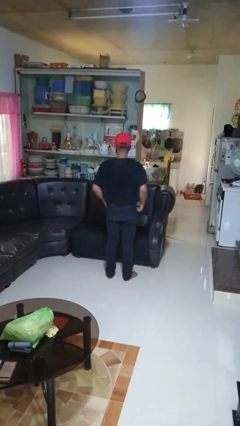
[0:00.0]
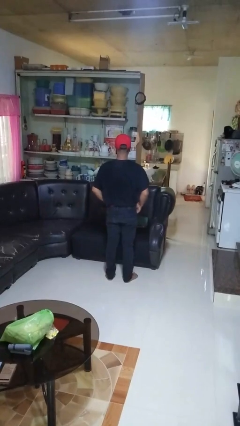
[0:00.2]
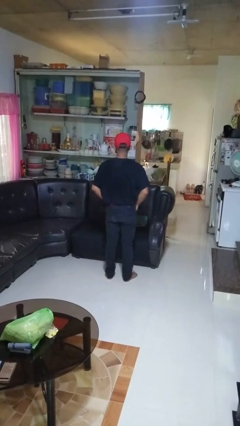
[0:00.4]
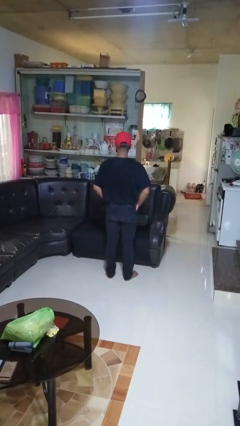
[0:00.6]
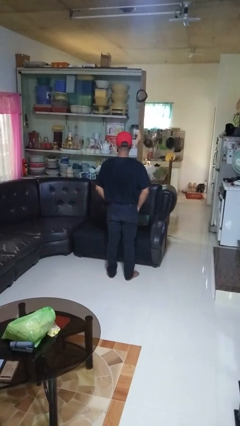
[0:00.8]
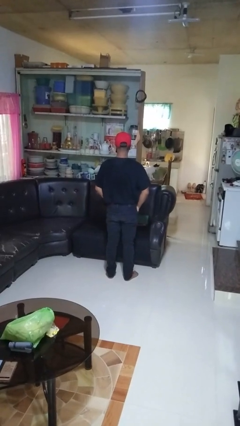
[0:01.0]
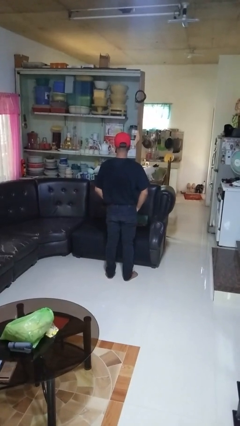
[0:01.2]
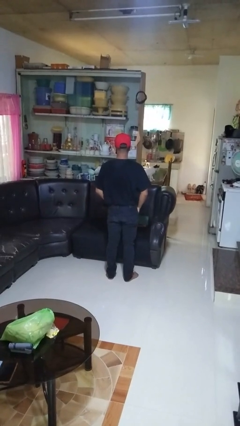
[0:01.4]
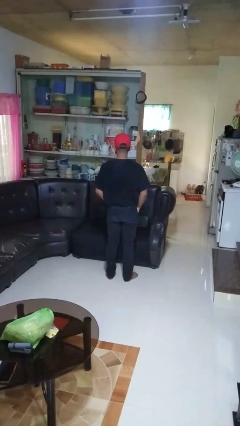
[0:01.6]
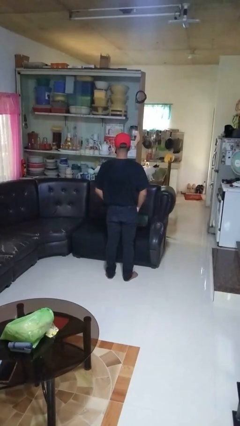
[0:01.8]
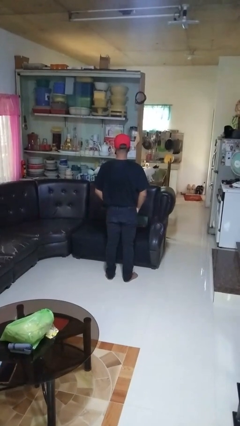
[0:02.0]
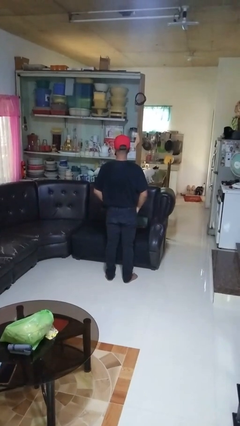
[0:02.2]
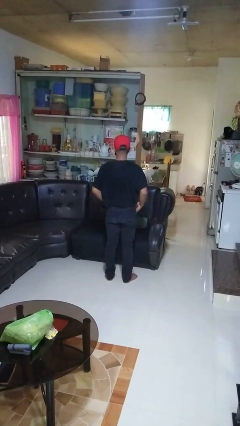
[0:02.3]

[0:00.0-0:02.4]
person puts hands in back pockets

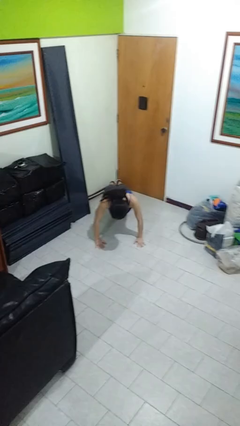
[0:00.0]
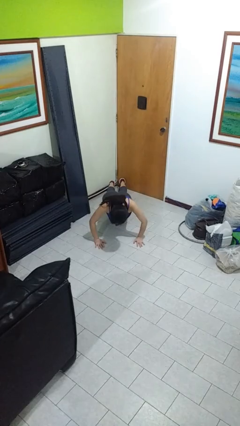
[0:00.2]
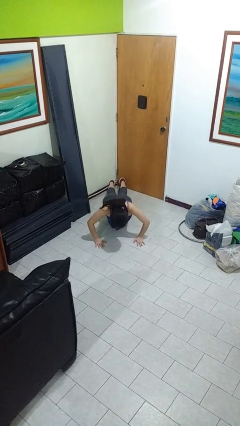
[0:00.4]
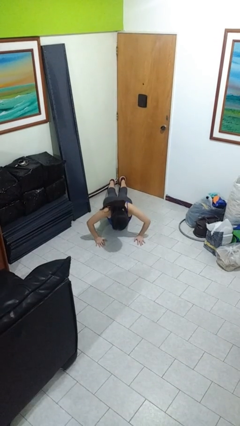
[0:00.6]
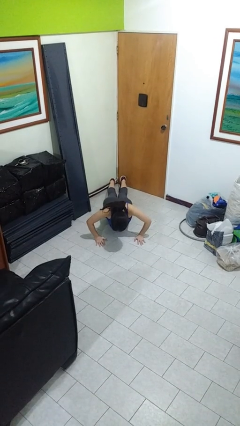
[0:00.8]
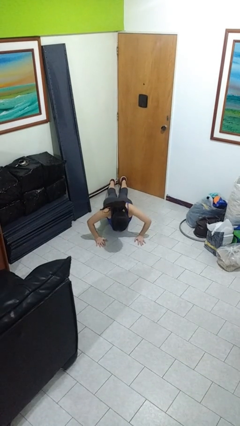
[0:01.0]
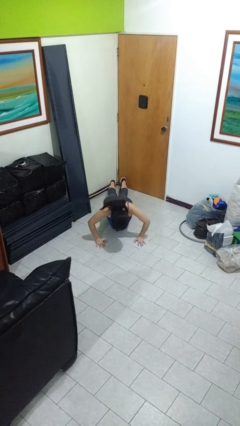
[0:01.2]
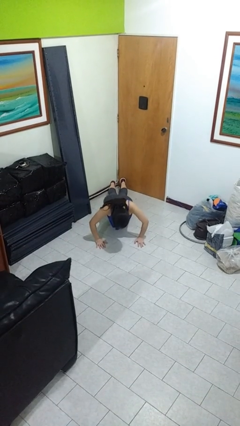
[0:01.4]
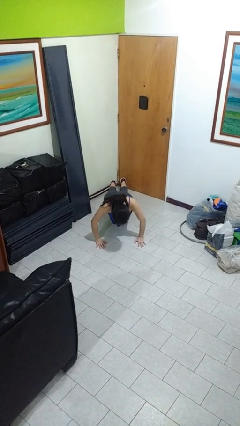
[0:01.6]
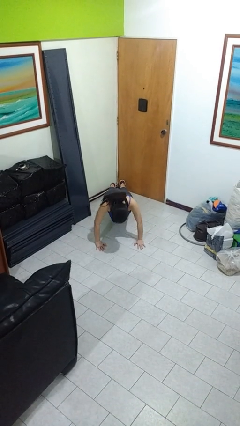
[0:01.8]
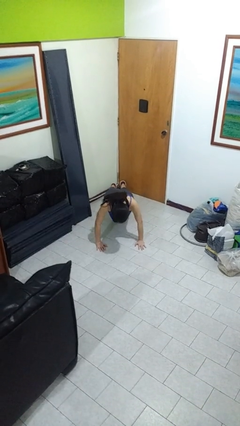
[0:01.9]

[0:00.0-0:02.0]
person exercises with pushup

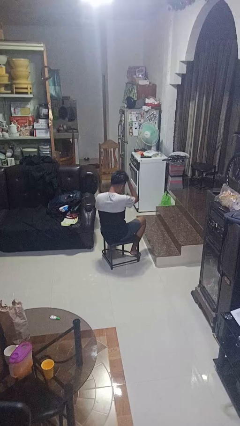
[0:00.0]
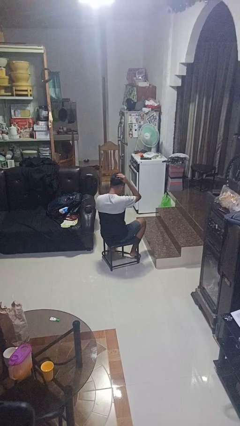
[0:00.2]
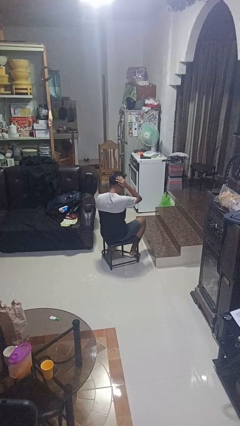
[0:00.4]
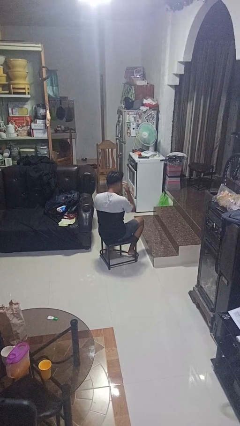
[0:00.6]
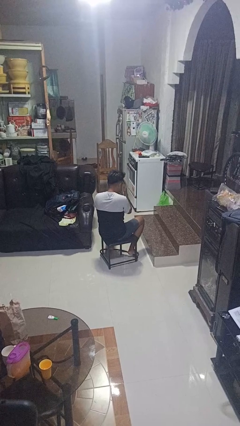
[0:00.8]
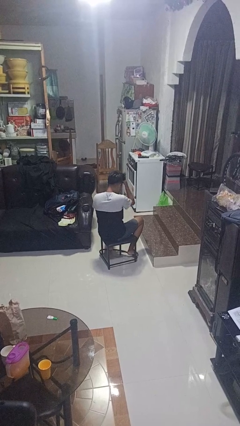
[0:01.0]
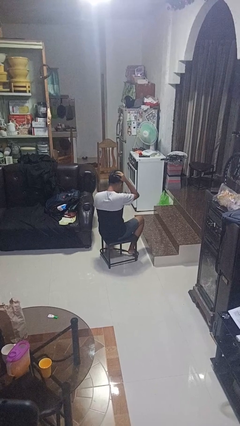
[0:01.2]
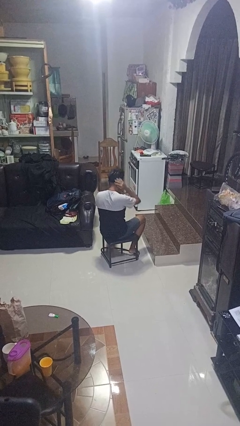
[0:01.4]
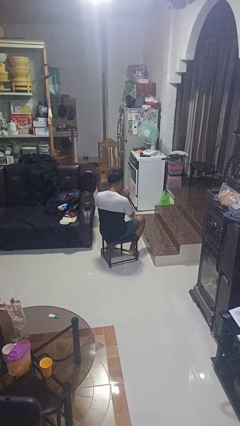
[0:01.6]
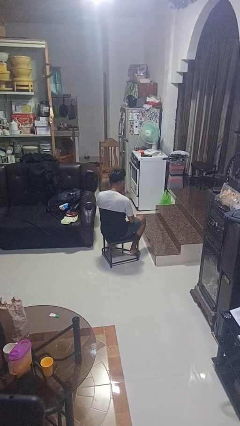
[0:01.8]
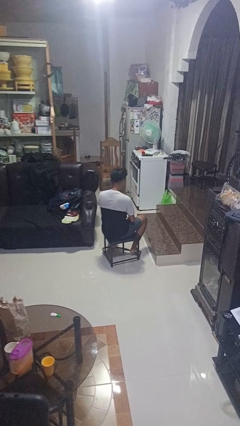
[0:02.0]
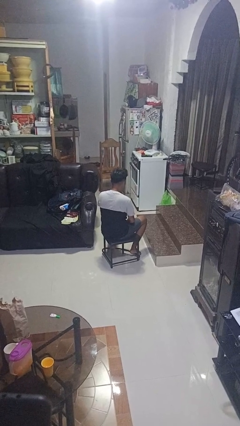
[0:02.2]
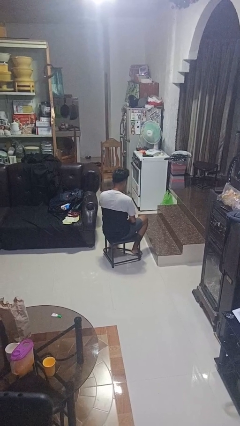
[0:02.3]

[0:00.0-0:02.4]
person strokes hair

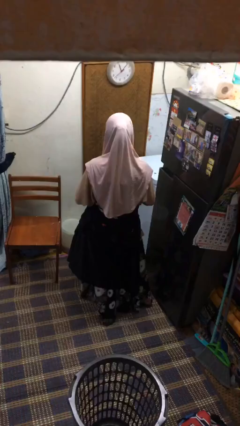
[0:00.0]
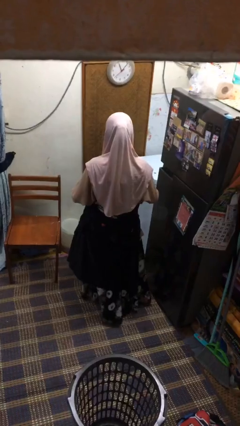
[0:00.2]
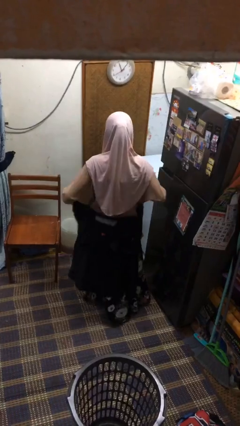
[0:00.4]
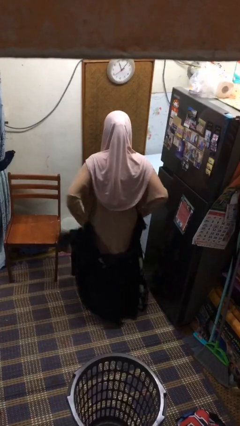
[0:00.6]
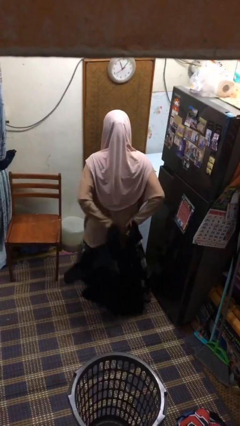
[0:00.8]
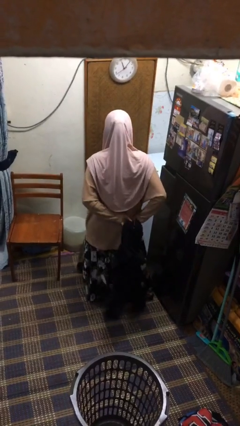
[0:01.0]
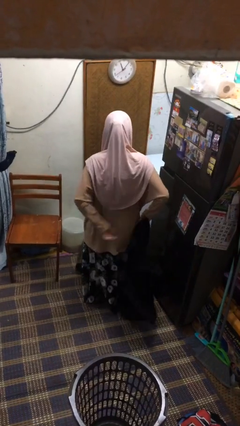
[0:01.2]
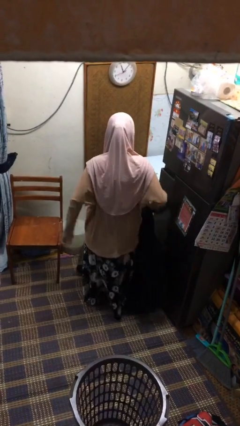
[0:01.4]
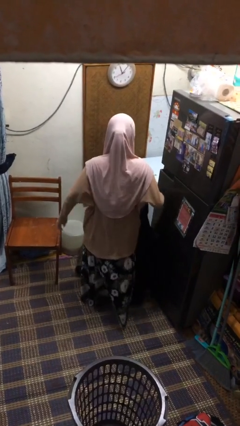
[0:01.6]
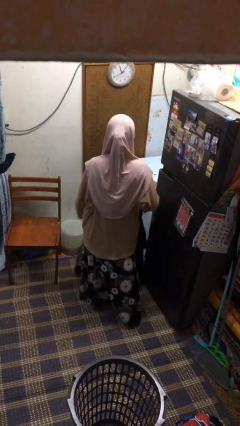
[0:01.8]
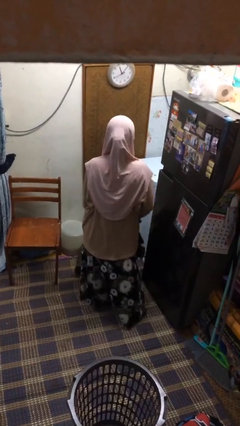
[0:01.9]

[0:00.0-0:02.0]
person unties jacket around waist

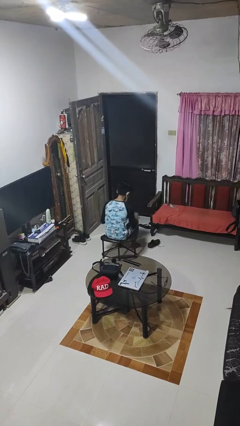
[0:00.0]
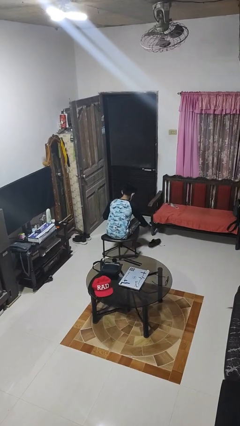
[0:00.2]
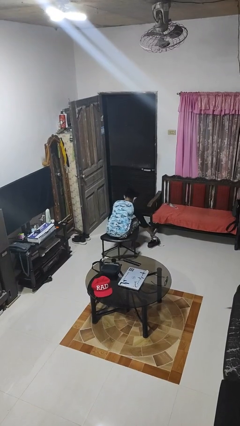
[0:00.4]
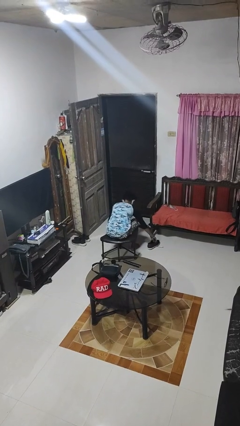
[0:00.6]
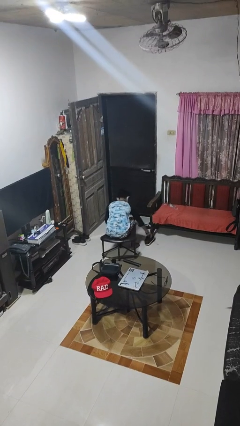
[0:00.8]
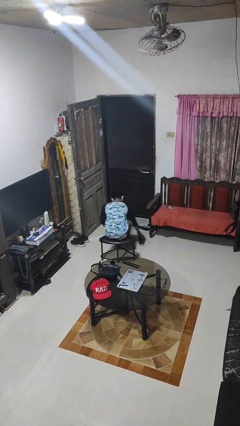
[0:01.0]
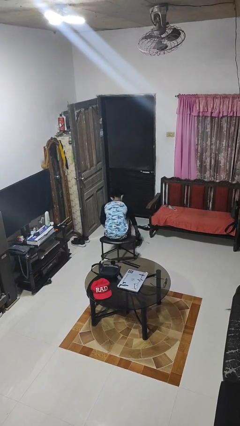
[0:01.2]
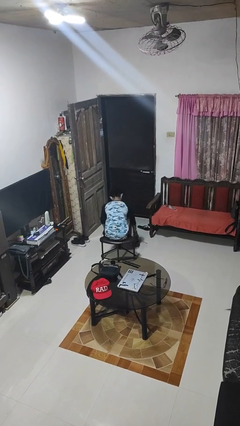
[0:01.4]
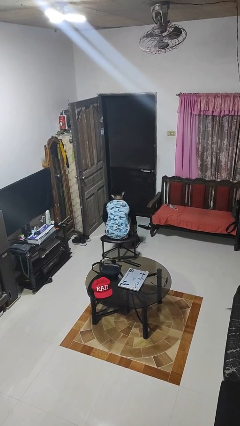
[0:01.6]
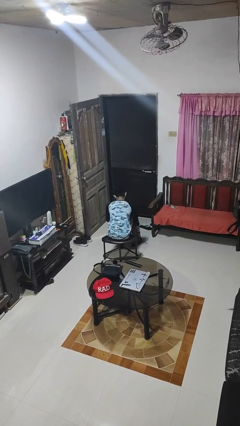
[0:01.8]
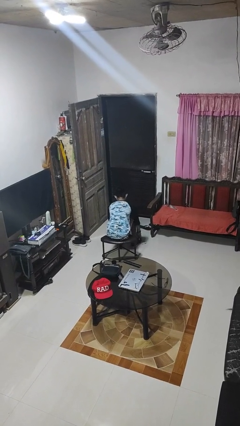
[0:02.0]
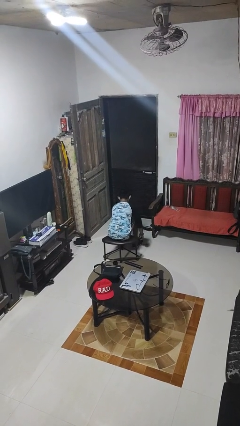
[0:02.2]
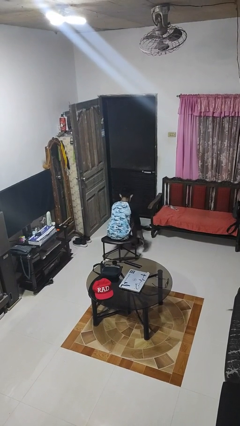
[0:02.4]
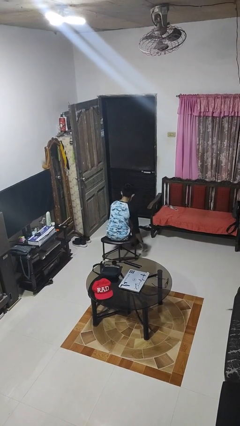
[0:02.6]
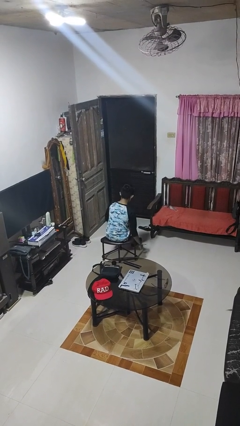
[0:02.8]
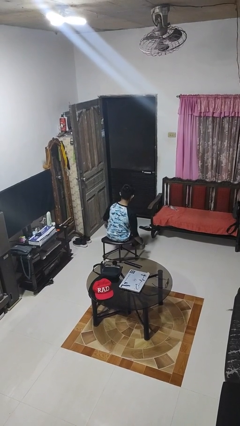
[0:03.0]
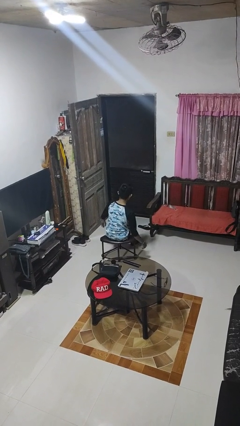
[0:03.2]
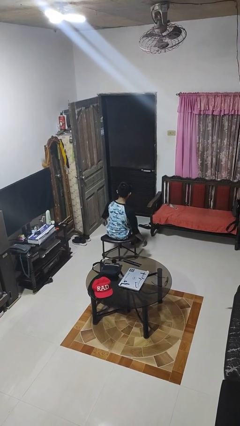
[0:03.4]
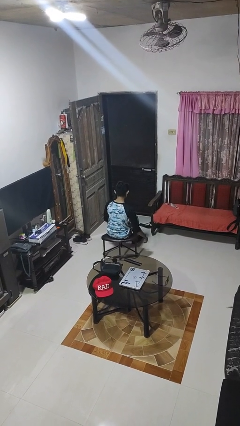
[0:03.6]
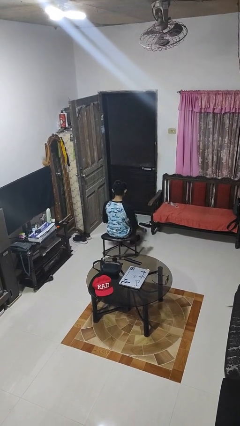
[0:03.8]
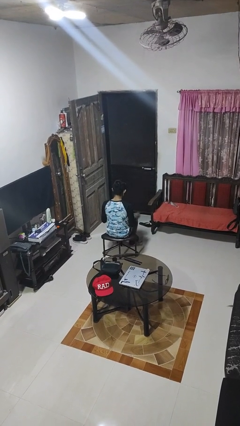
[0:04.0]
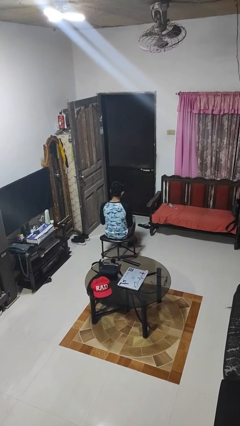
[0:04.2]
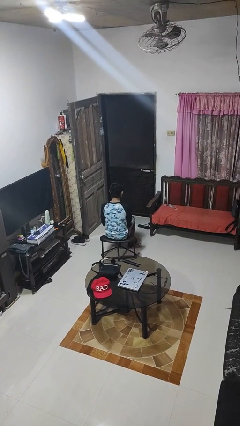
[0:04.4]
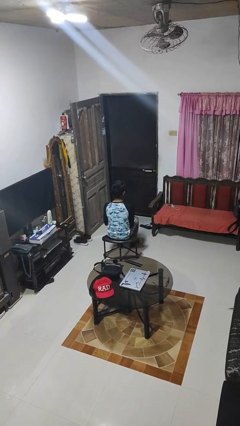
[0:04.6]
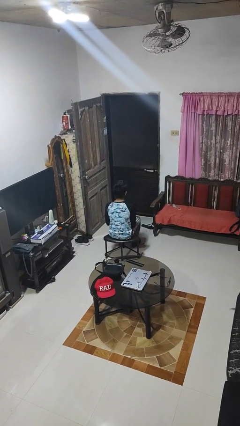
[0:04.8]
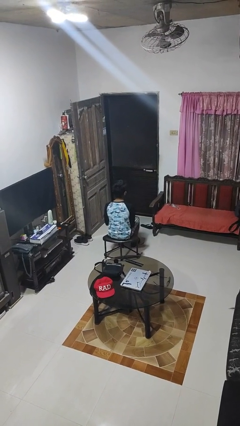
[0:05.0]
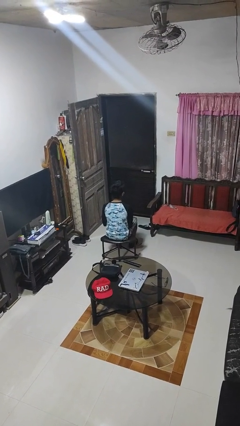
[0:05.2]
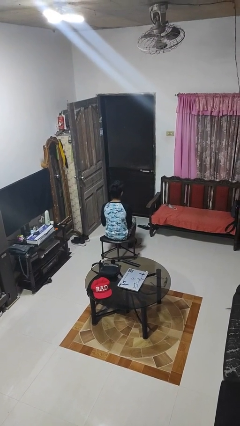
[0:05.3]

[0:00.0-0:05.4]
person puts on gloves

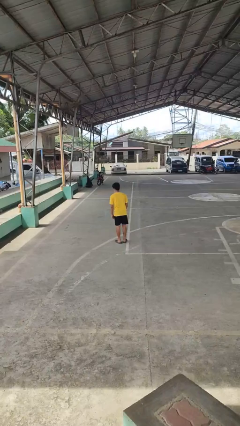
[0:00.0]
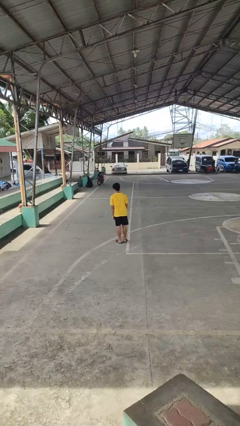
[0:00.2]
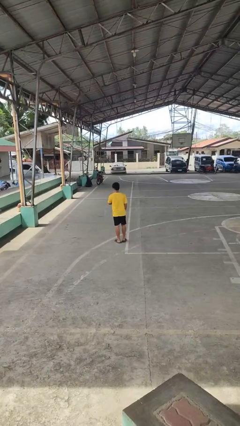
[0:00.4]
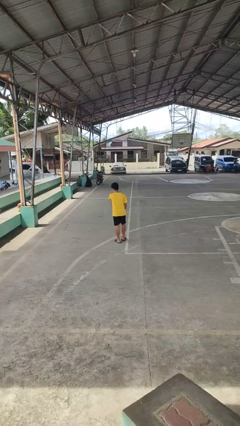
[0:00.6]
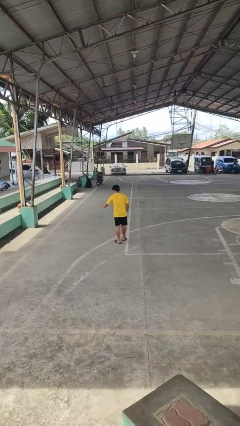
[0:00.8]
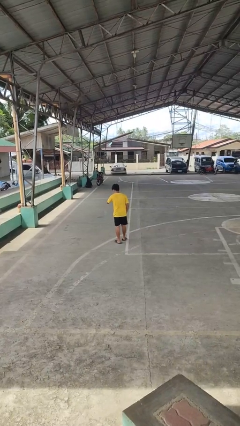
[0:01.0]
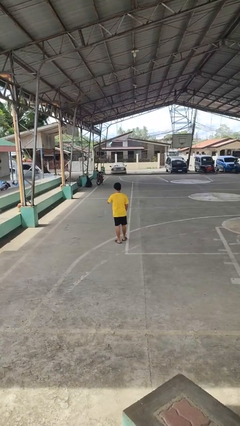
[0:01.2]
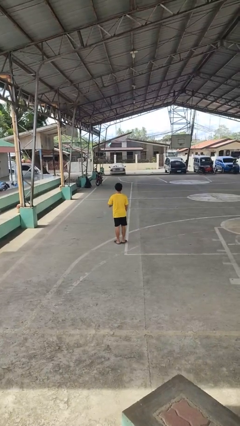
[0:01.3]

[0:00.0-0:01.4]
person karate chop

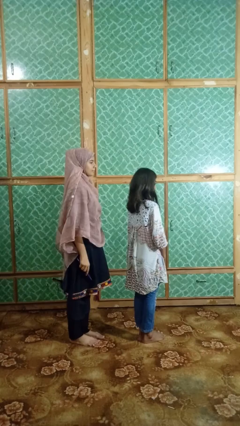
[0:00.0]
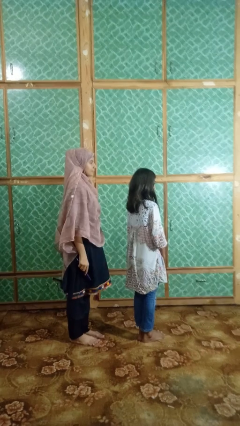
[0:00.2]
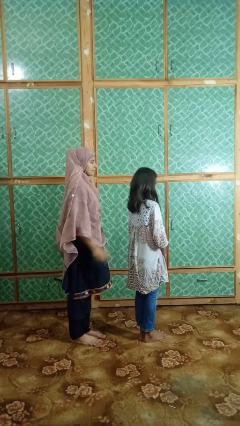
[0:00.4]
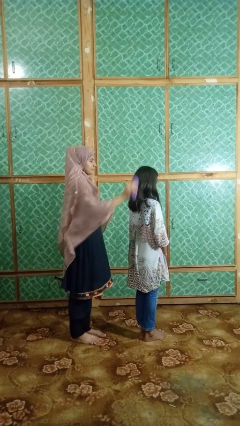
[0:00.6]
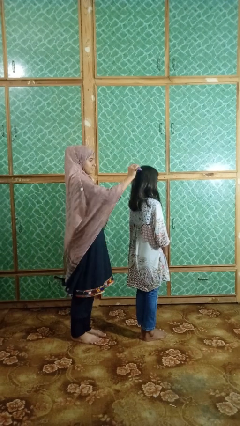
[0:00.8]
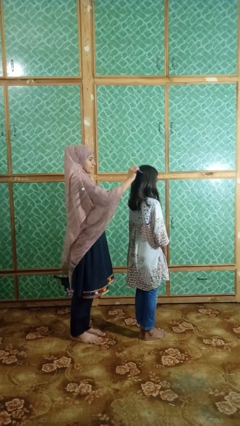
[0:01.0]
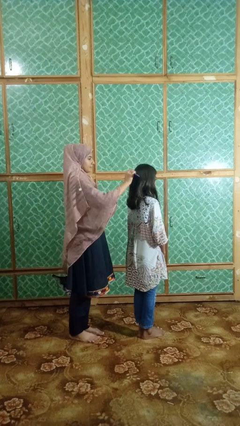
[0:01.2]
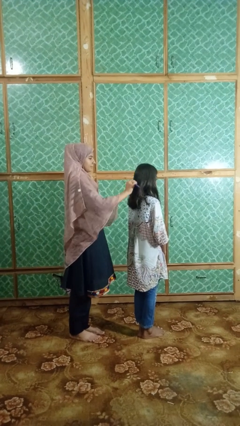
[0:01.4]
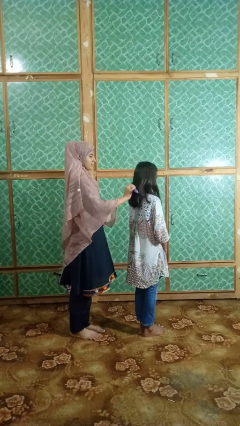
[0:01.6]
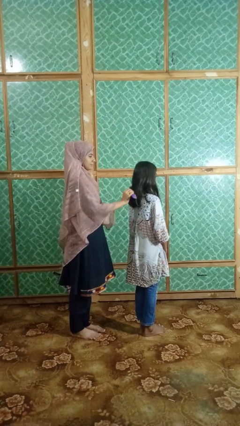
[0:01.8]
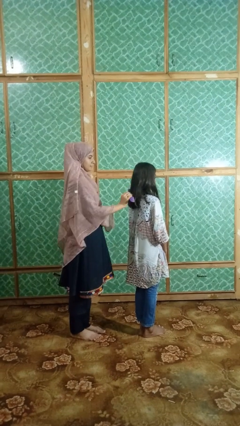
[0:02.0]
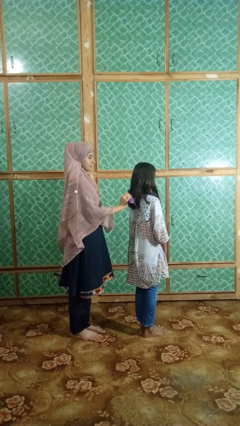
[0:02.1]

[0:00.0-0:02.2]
person brushes hair of person
